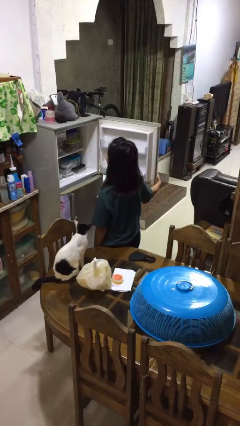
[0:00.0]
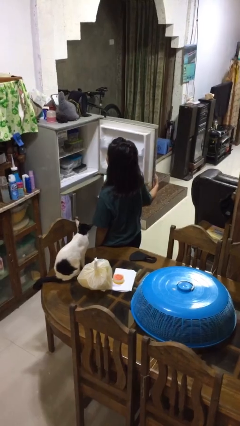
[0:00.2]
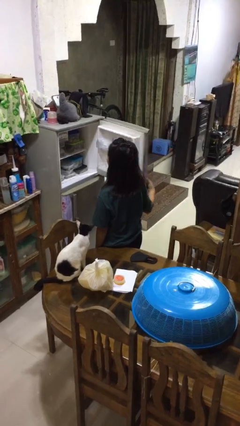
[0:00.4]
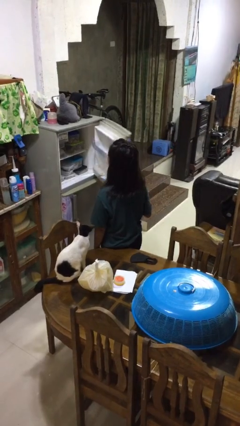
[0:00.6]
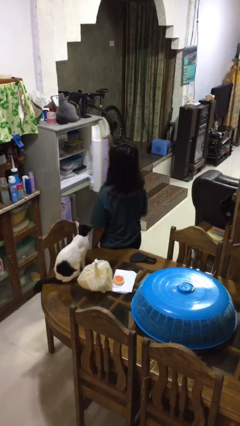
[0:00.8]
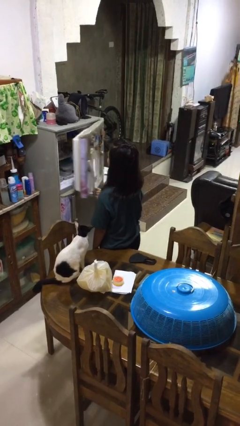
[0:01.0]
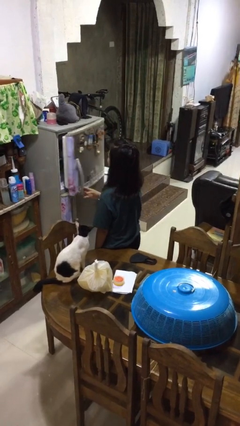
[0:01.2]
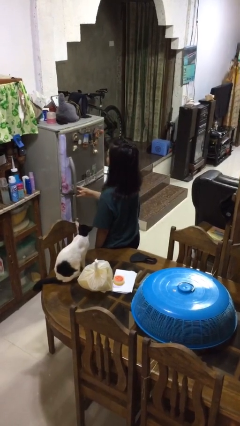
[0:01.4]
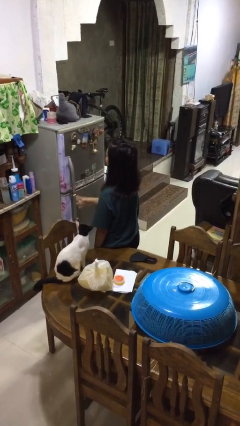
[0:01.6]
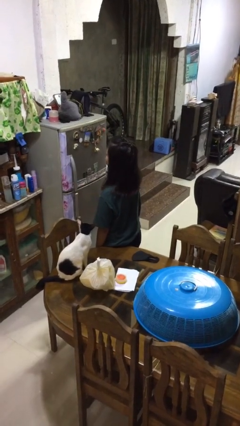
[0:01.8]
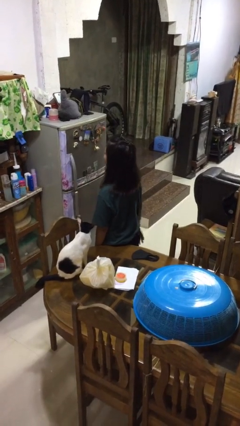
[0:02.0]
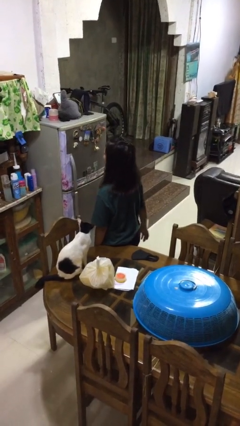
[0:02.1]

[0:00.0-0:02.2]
person closes refrigerator

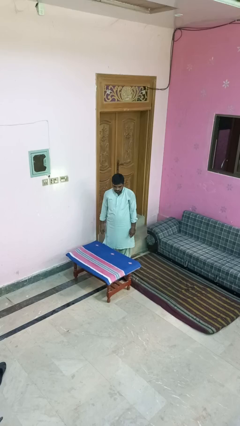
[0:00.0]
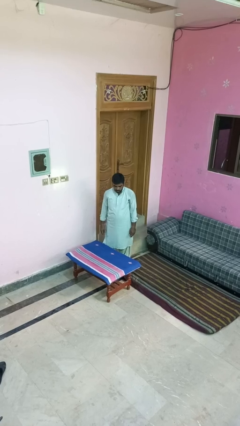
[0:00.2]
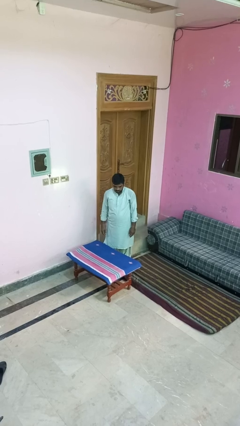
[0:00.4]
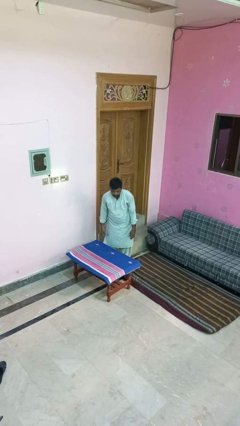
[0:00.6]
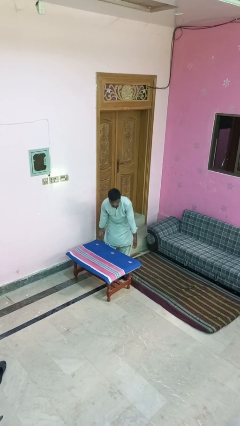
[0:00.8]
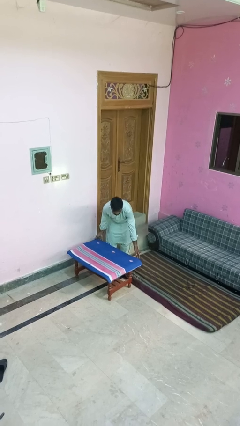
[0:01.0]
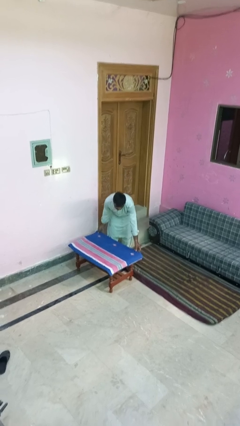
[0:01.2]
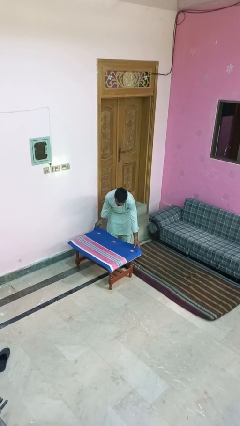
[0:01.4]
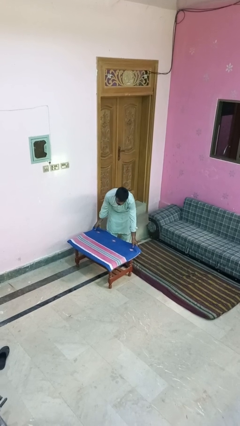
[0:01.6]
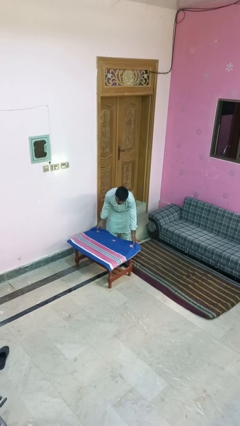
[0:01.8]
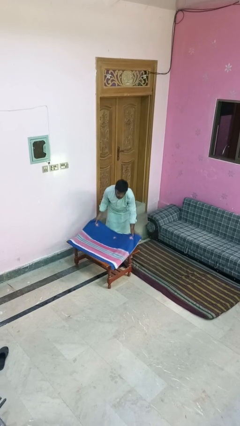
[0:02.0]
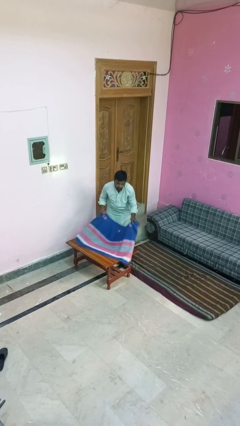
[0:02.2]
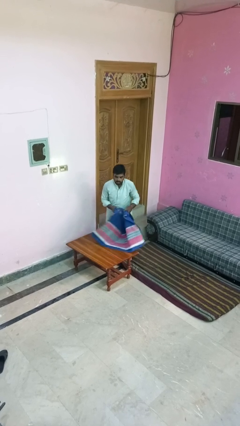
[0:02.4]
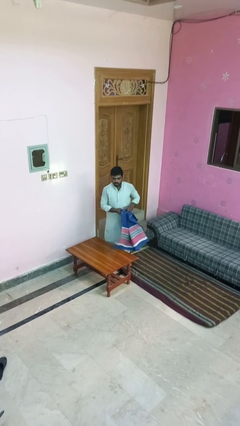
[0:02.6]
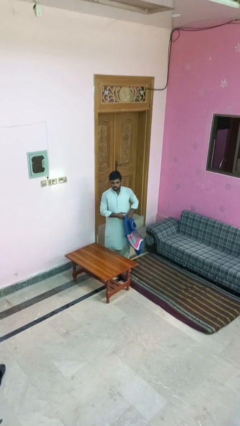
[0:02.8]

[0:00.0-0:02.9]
person folds tablecloth

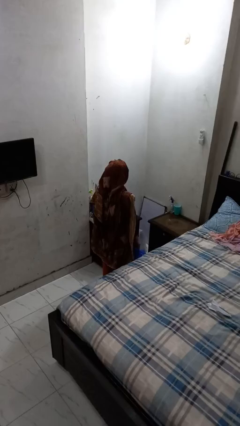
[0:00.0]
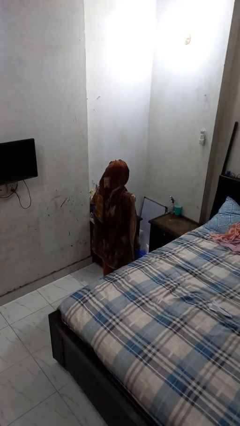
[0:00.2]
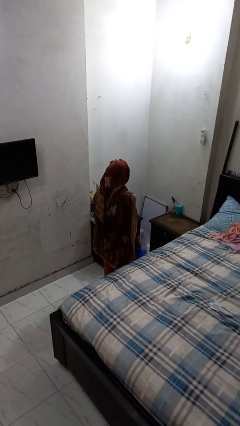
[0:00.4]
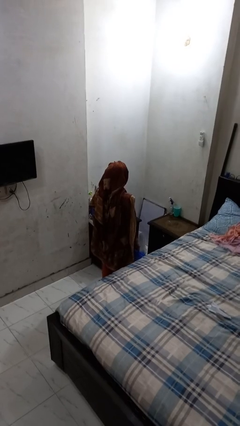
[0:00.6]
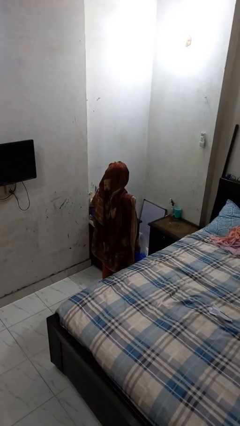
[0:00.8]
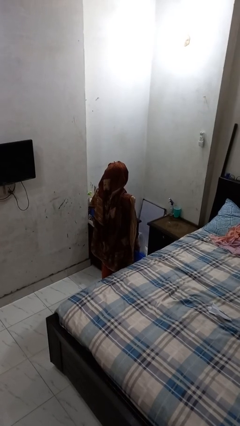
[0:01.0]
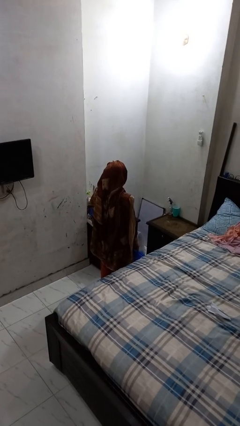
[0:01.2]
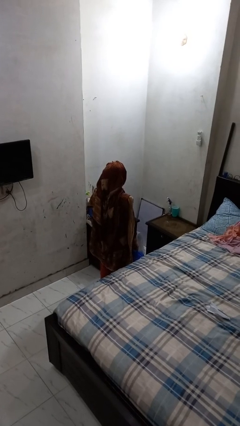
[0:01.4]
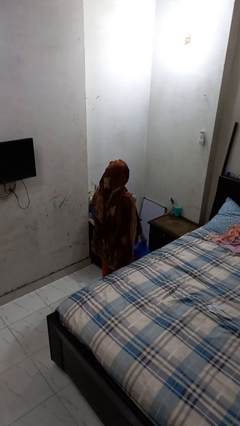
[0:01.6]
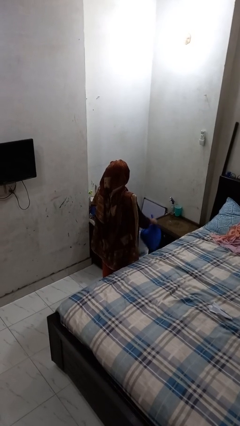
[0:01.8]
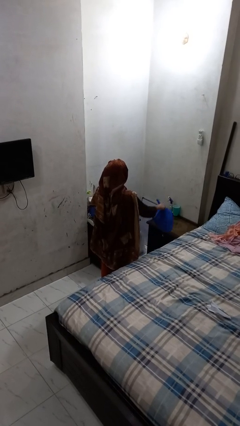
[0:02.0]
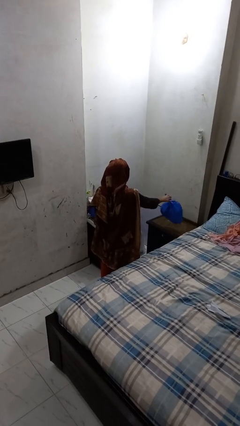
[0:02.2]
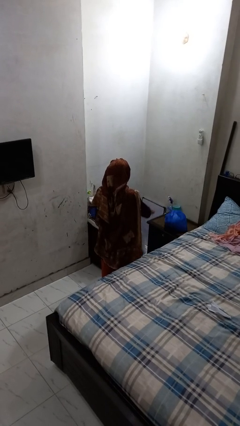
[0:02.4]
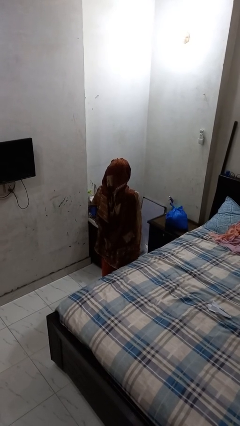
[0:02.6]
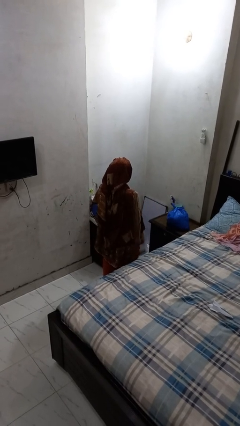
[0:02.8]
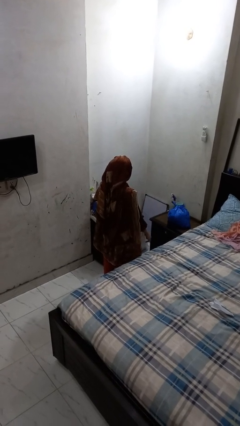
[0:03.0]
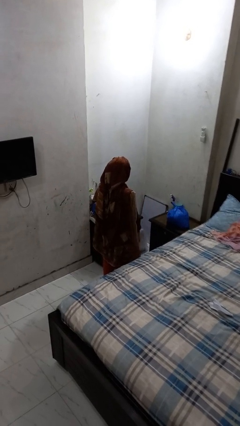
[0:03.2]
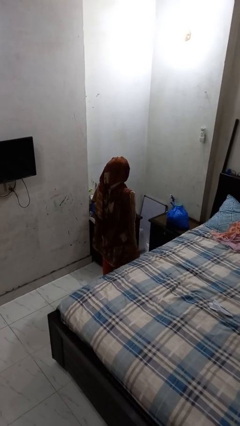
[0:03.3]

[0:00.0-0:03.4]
person throws object on table

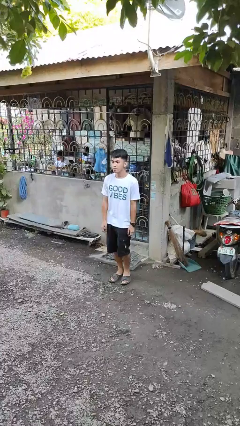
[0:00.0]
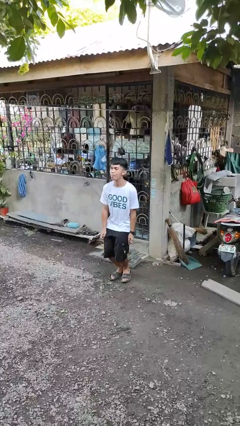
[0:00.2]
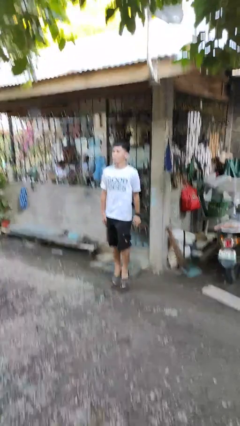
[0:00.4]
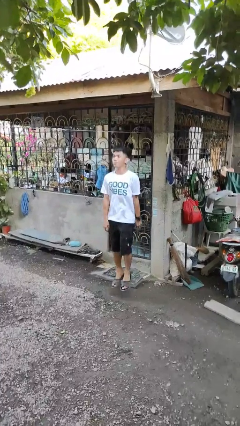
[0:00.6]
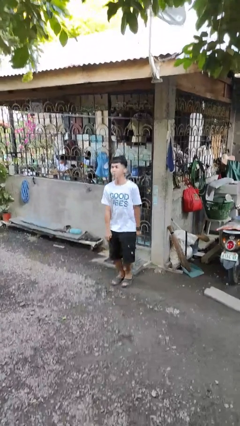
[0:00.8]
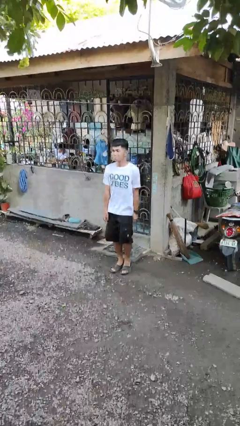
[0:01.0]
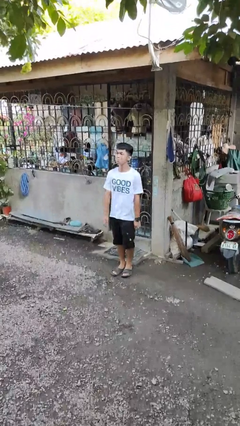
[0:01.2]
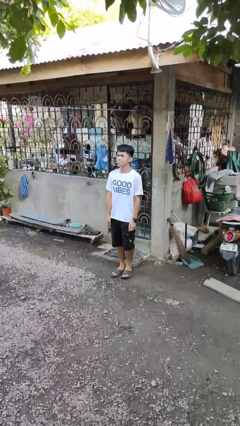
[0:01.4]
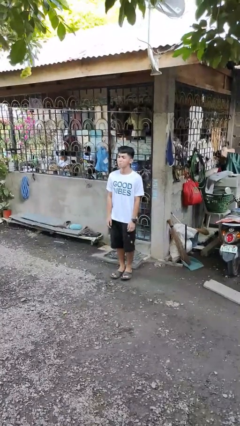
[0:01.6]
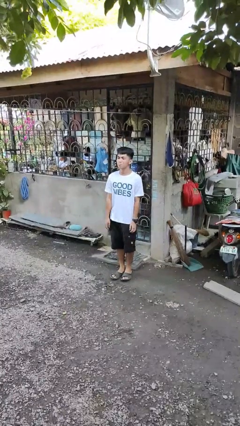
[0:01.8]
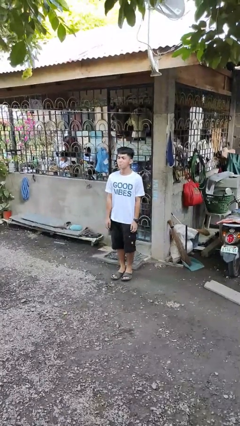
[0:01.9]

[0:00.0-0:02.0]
person jumps

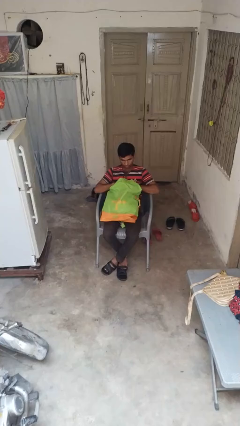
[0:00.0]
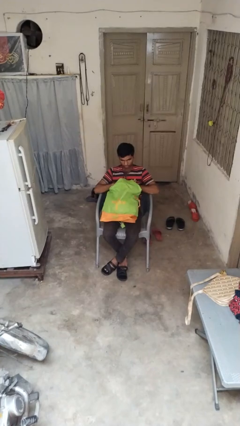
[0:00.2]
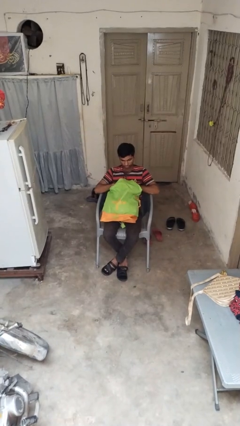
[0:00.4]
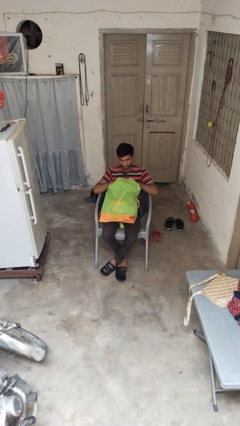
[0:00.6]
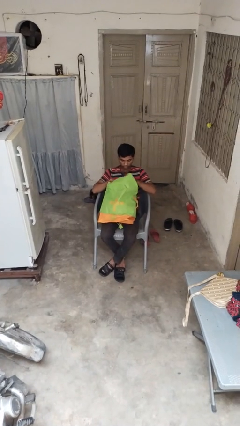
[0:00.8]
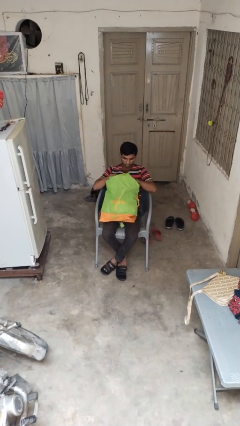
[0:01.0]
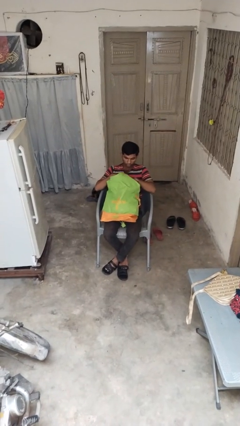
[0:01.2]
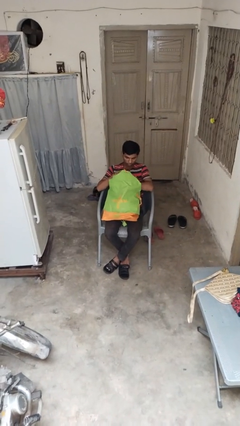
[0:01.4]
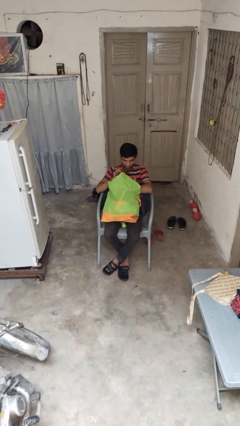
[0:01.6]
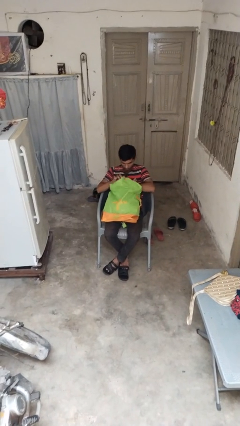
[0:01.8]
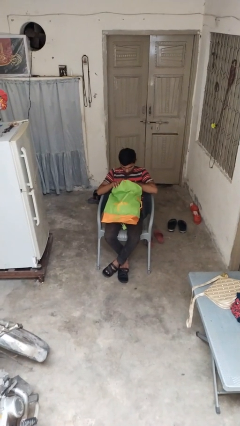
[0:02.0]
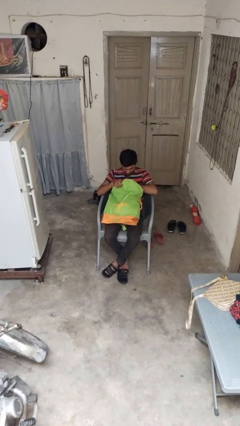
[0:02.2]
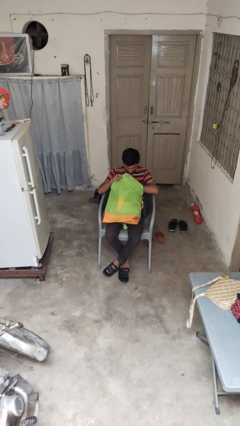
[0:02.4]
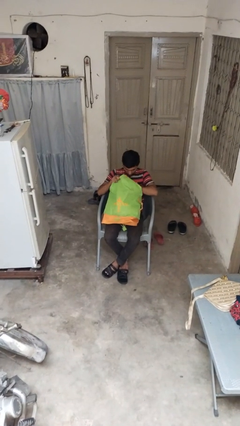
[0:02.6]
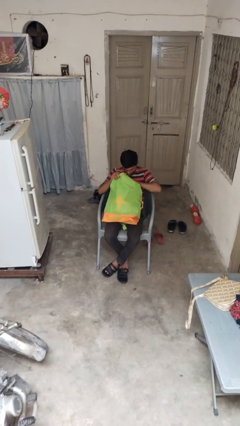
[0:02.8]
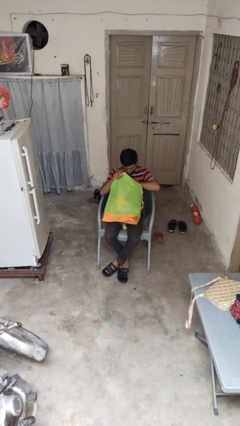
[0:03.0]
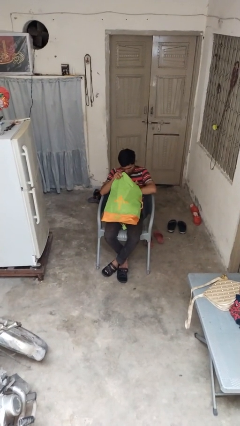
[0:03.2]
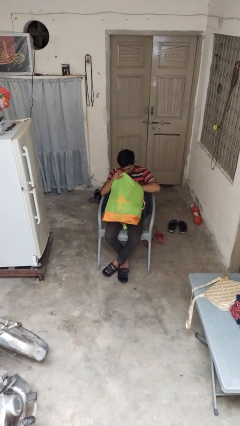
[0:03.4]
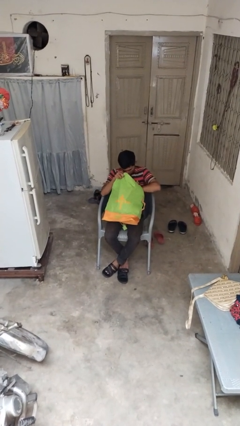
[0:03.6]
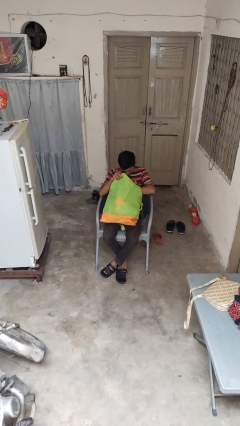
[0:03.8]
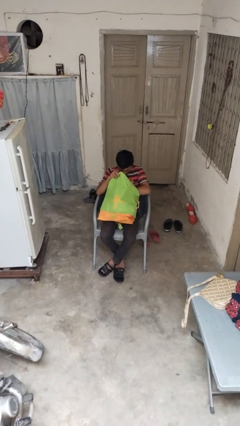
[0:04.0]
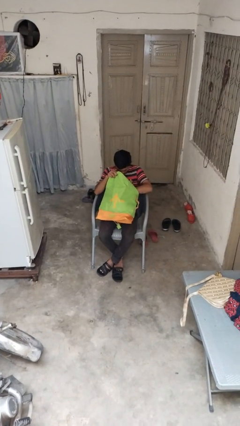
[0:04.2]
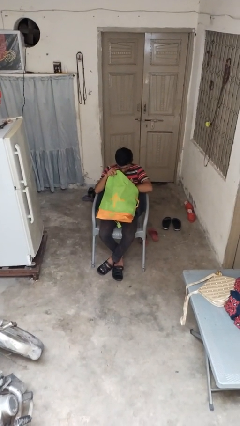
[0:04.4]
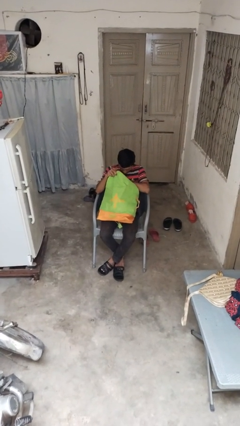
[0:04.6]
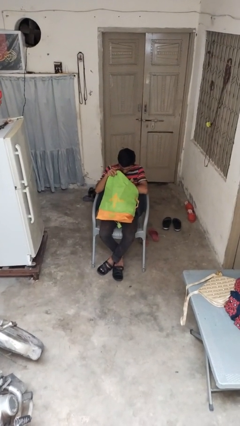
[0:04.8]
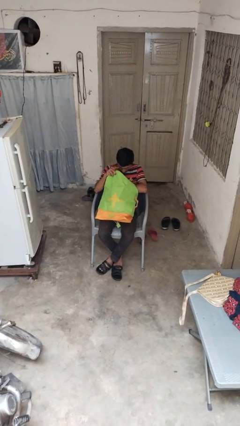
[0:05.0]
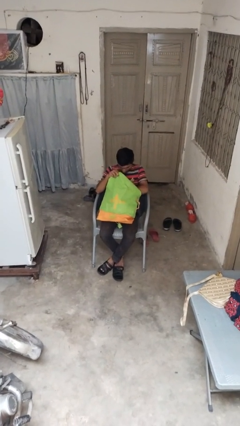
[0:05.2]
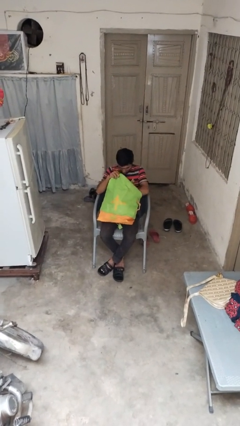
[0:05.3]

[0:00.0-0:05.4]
person searches in backpack

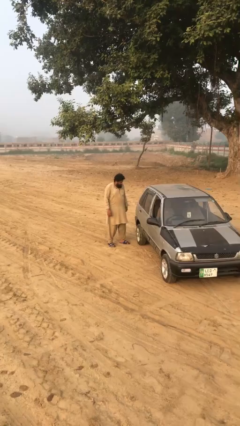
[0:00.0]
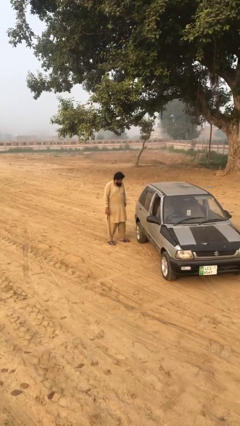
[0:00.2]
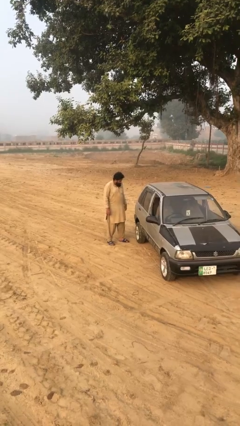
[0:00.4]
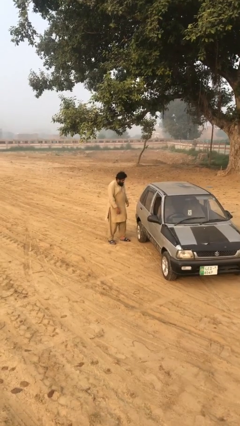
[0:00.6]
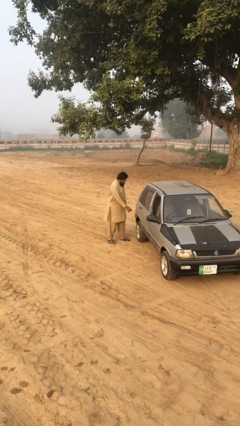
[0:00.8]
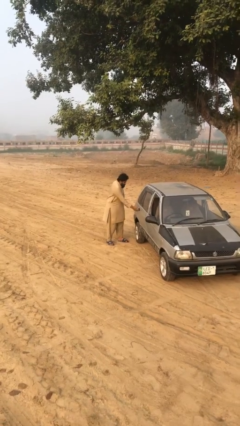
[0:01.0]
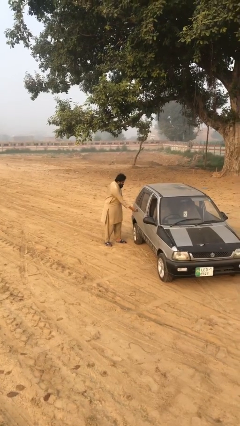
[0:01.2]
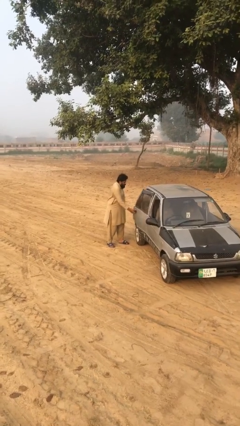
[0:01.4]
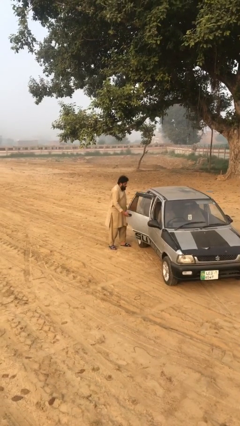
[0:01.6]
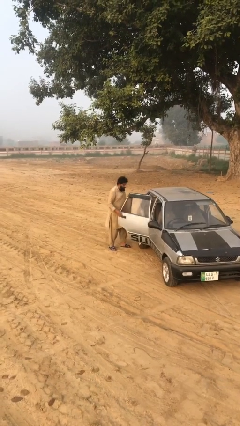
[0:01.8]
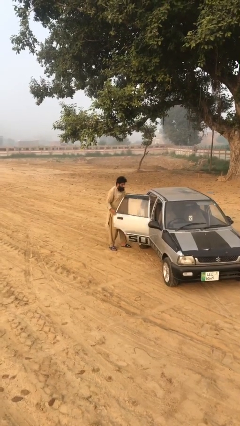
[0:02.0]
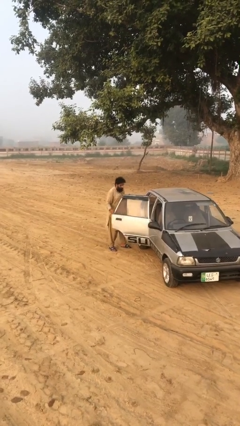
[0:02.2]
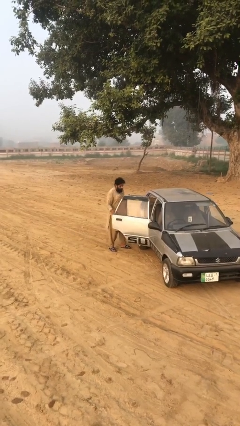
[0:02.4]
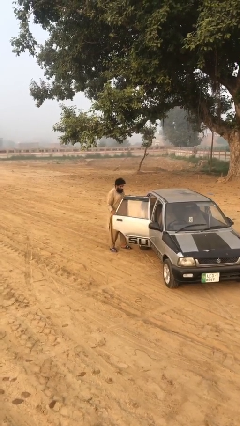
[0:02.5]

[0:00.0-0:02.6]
person opens car door
